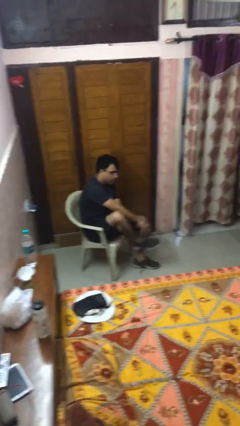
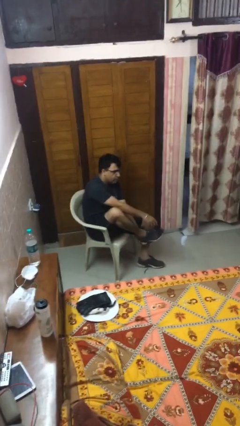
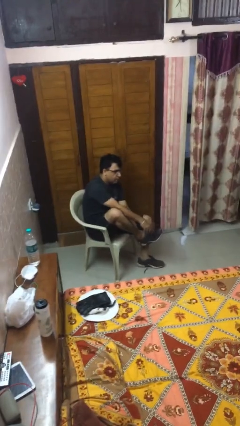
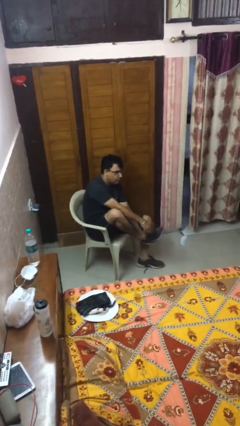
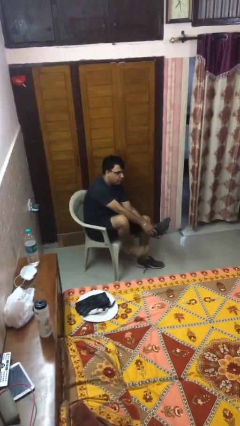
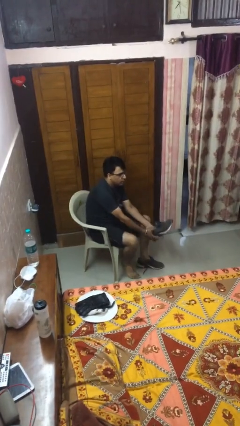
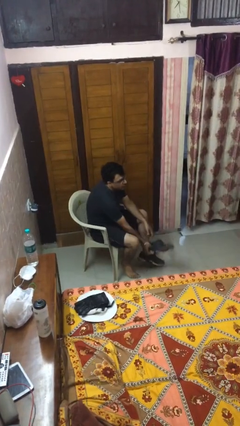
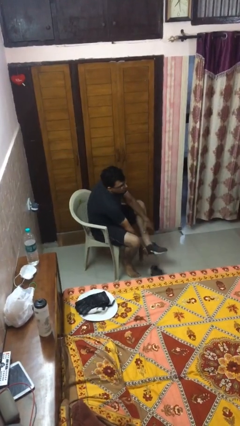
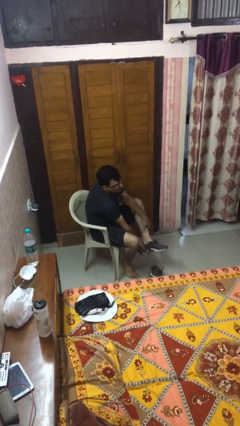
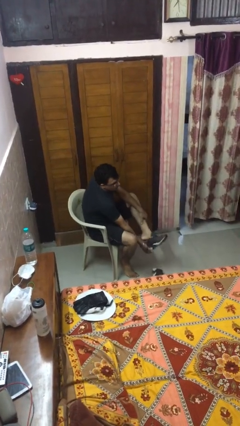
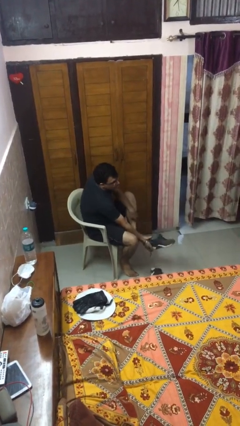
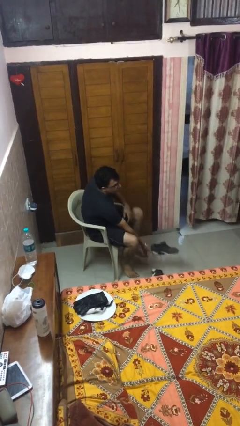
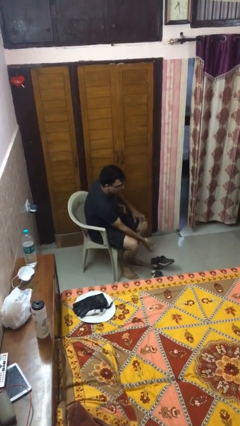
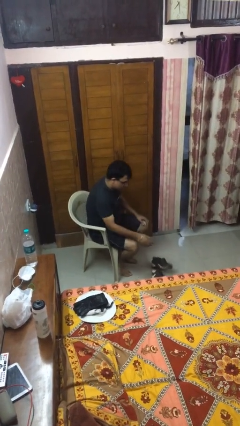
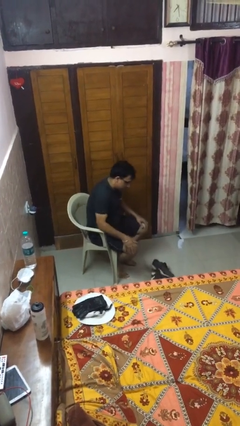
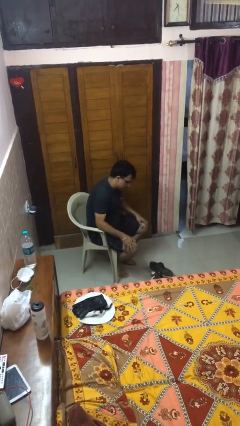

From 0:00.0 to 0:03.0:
person takes off shoes

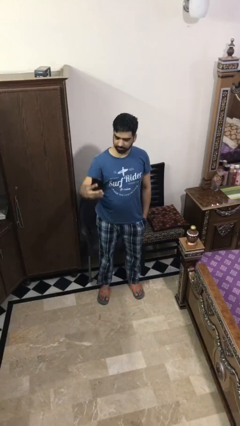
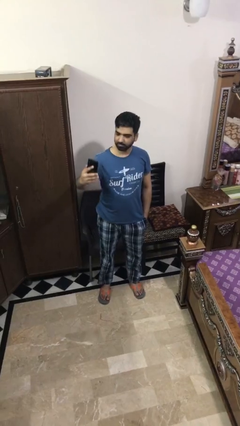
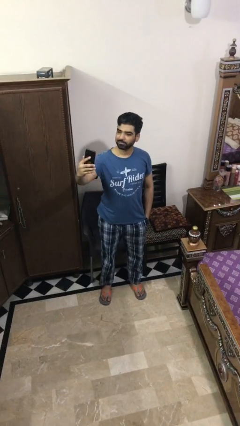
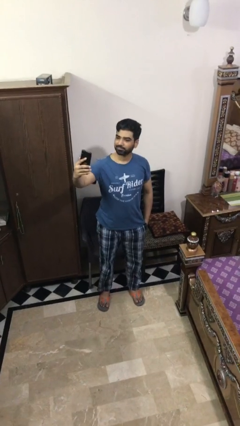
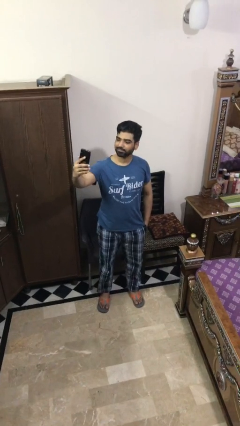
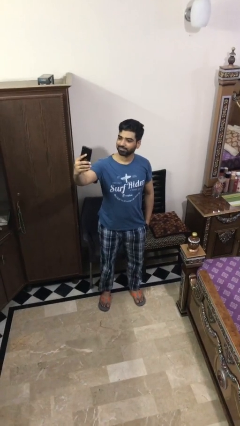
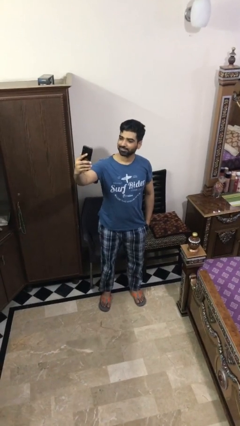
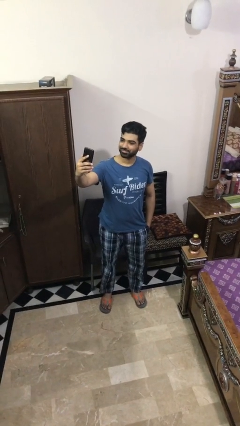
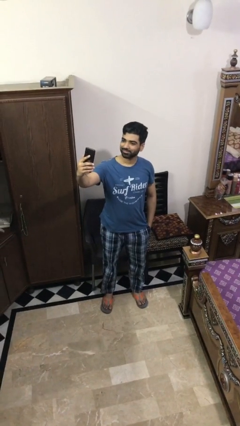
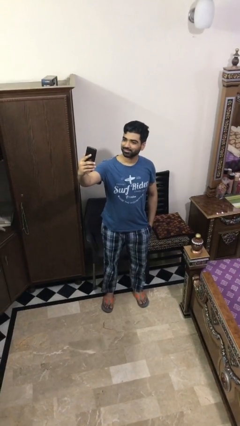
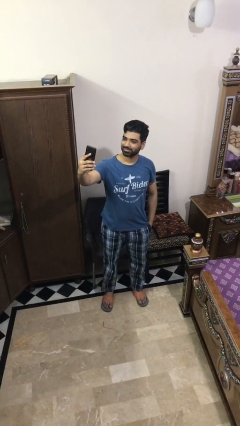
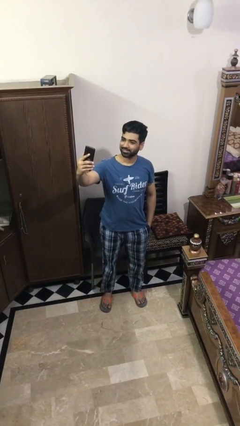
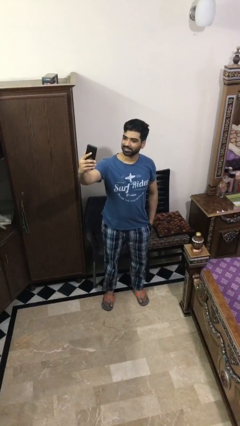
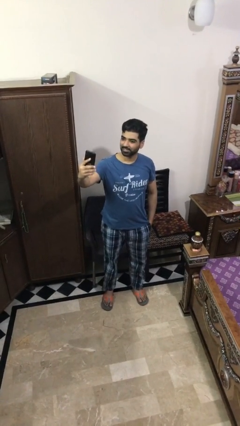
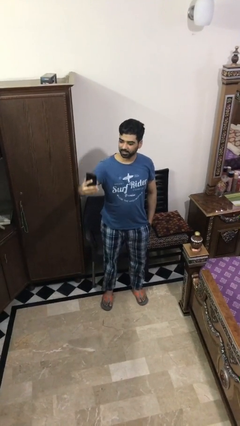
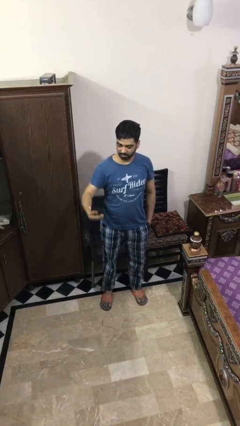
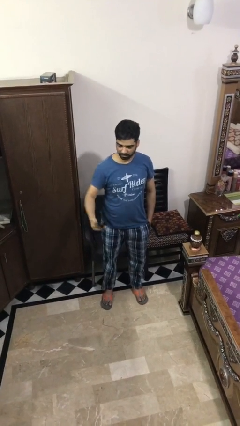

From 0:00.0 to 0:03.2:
person takes selfie

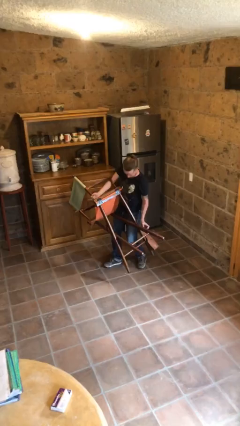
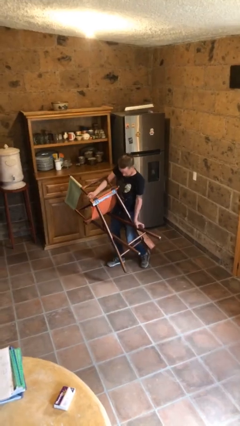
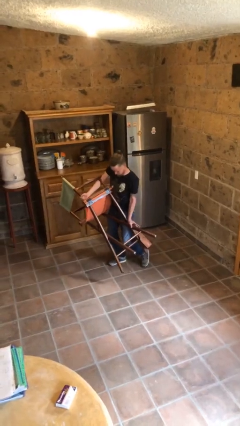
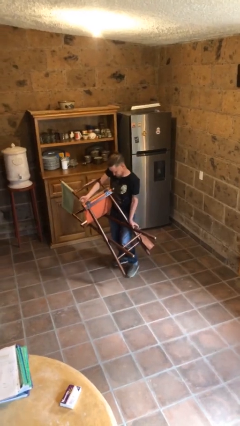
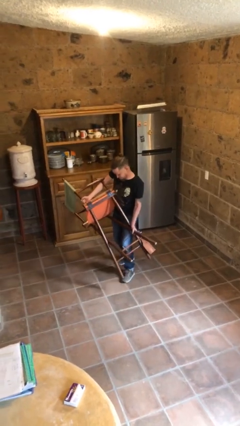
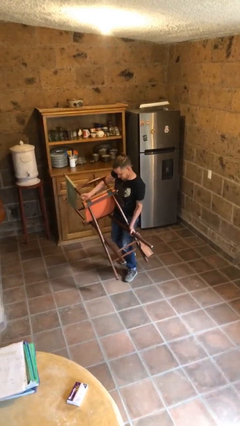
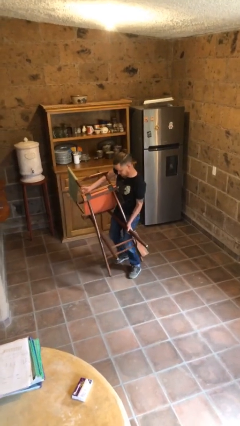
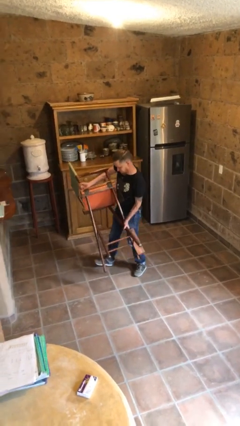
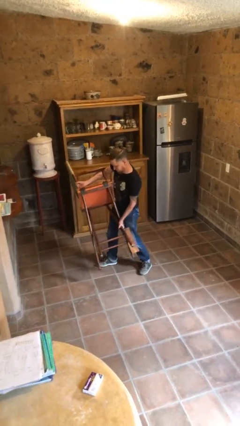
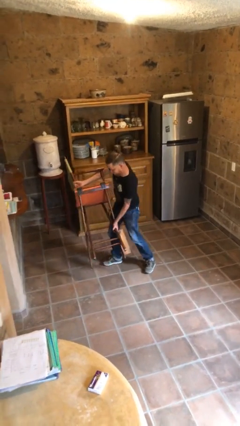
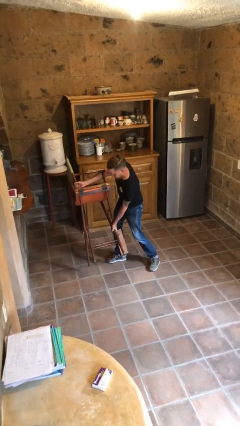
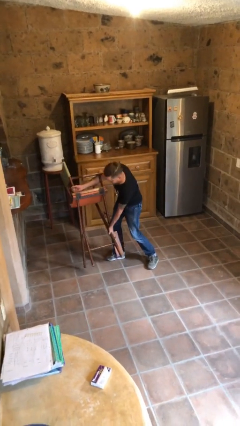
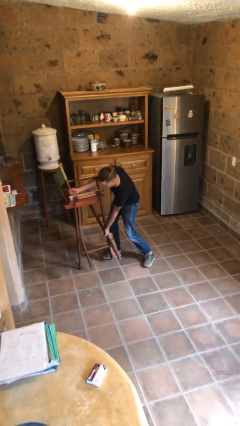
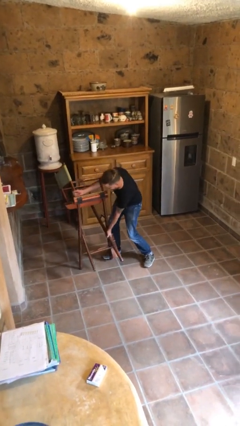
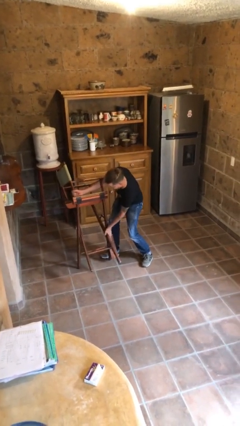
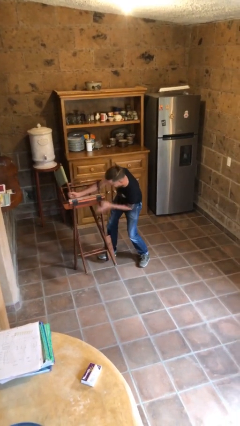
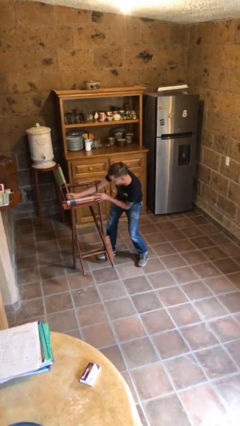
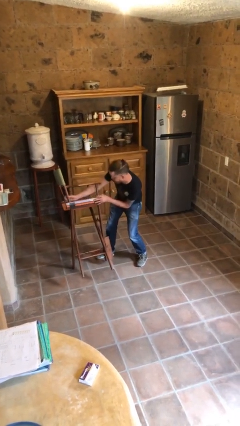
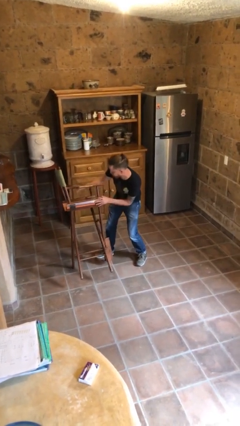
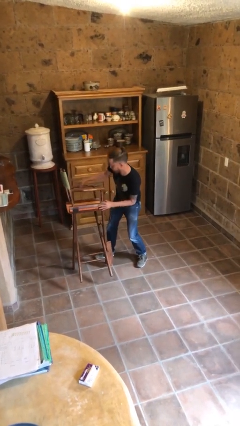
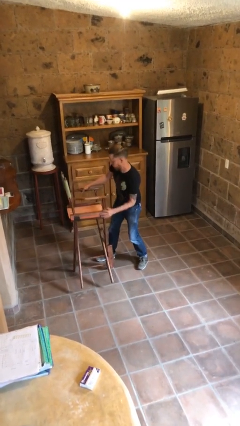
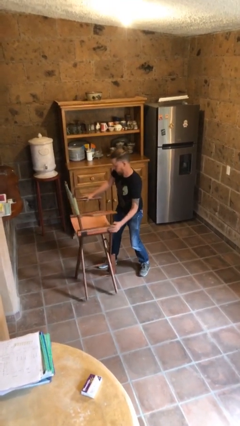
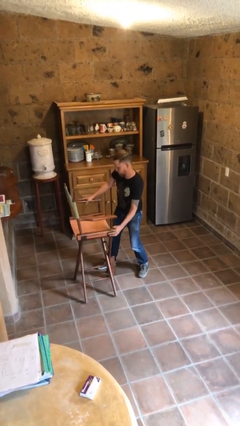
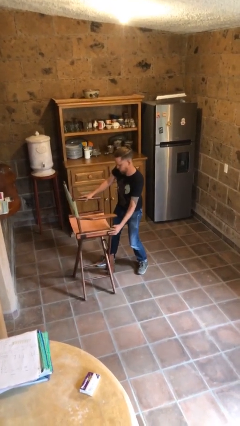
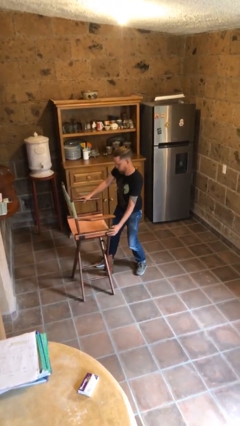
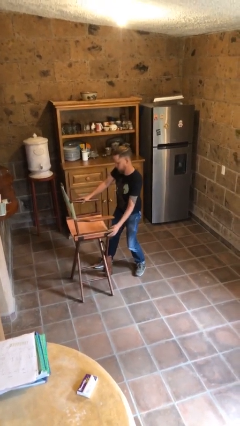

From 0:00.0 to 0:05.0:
person puts down object on floor

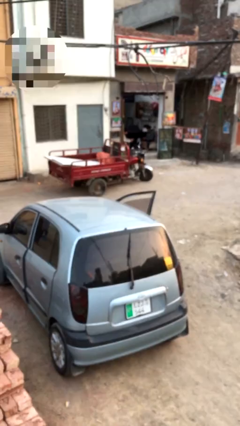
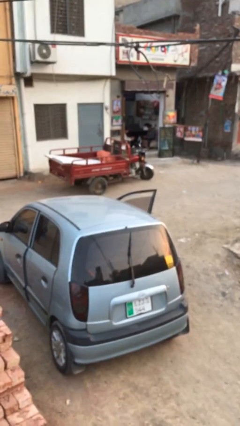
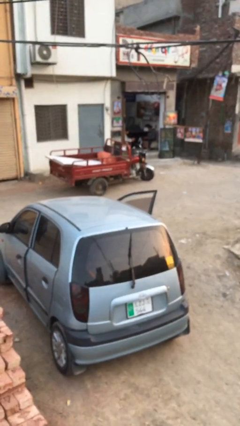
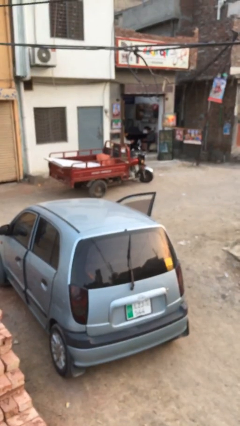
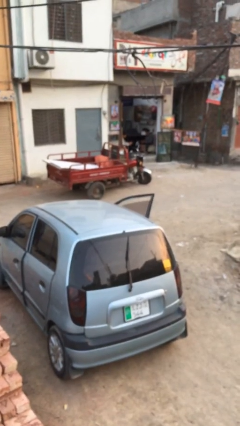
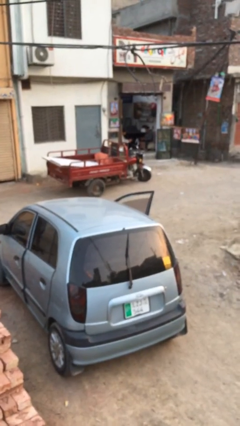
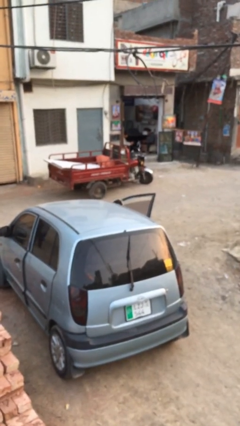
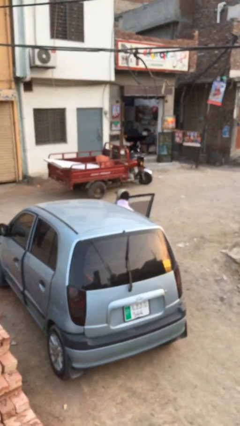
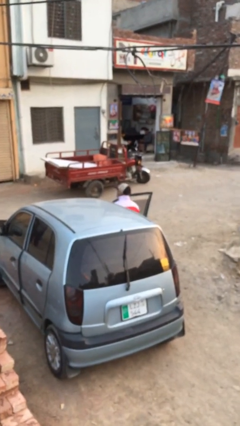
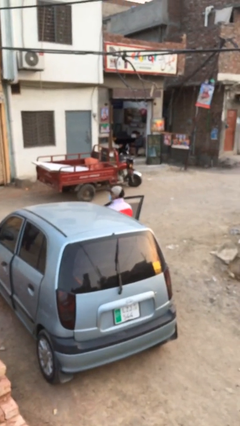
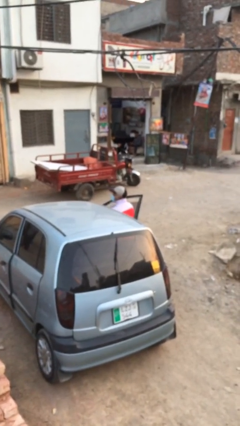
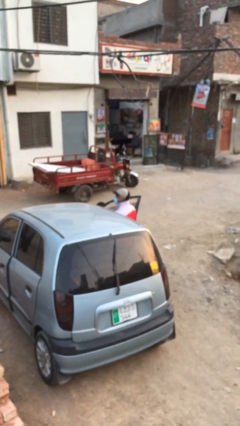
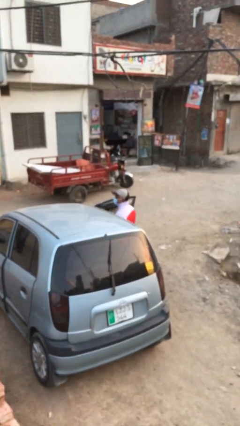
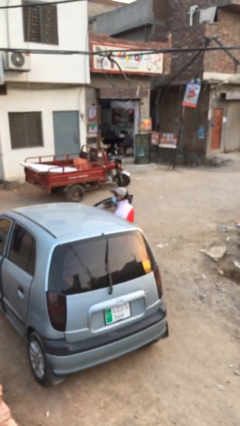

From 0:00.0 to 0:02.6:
person exits car

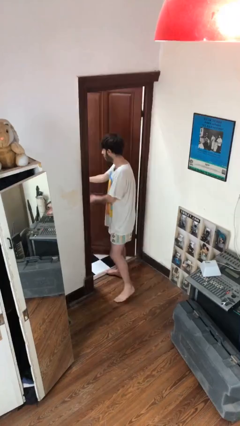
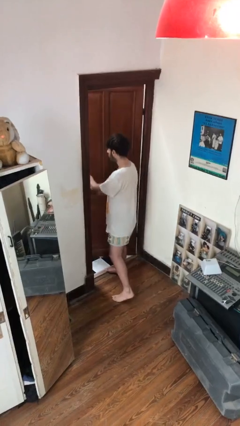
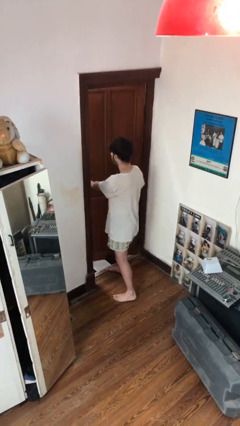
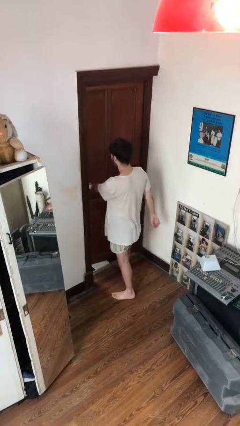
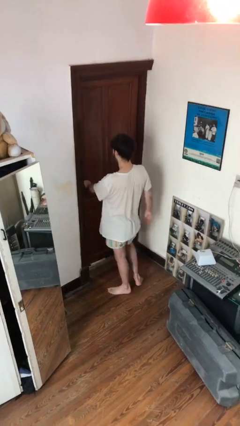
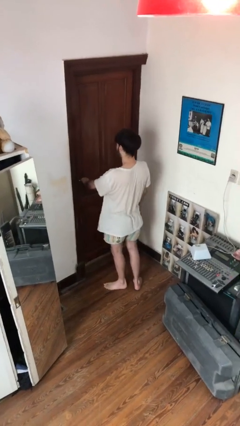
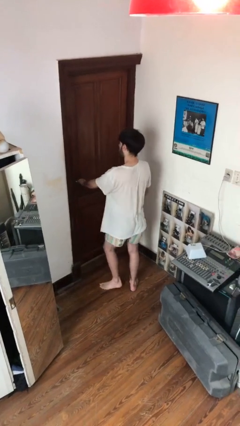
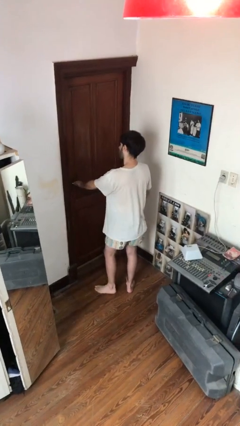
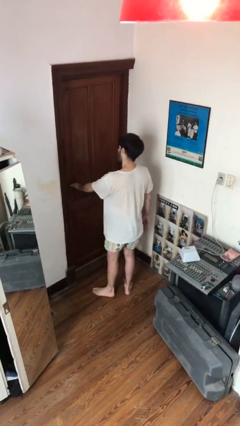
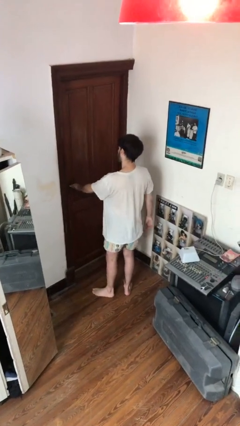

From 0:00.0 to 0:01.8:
person closes facility door

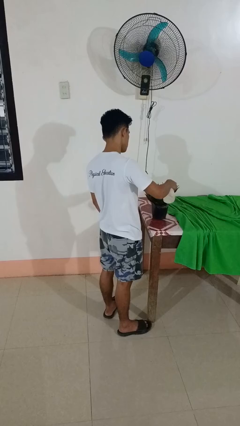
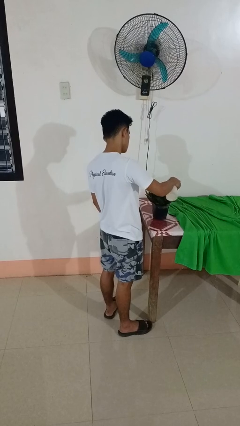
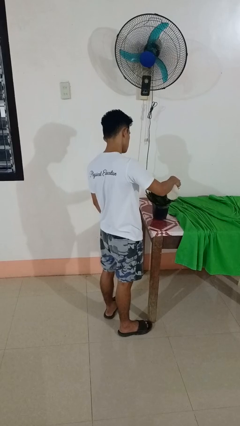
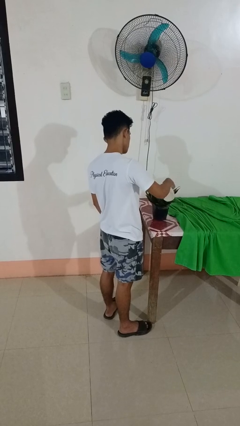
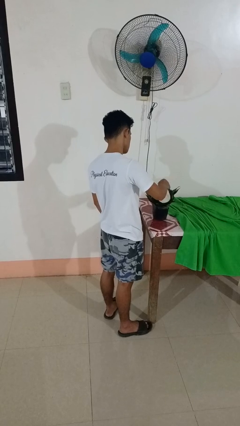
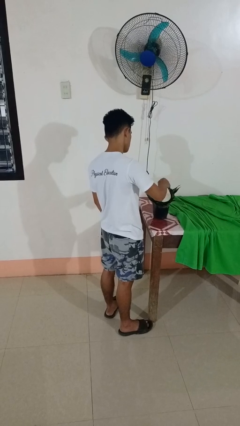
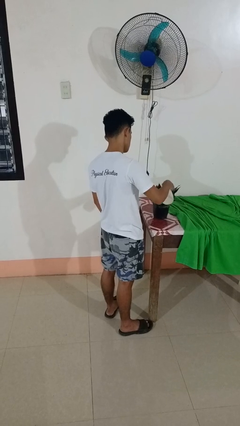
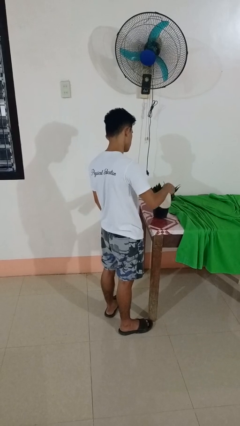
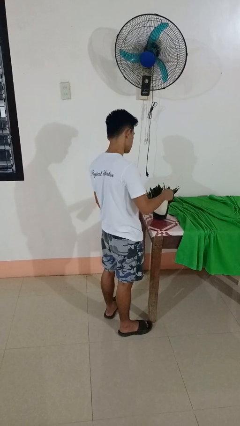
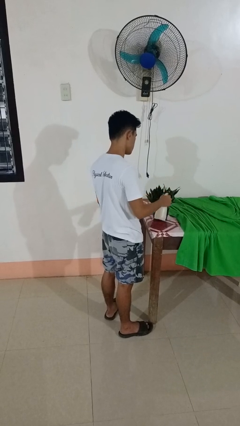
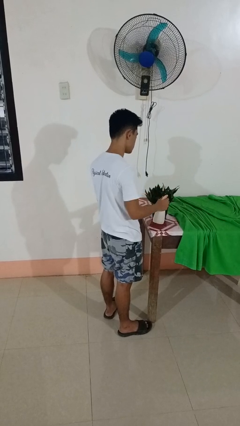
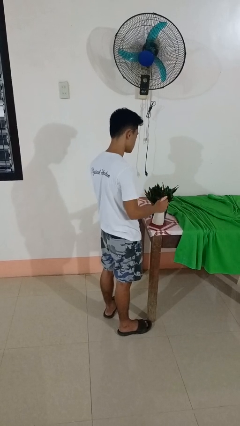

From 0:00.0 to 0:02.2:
person waters houseplant
